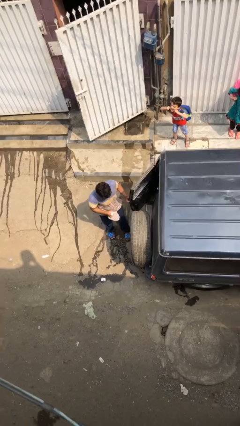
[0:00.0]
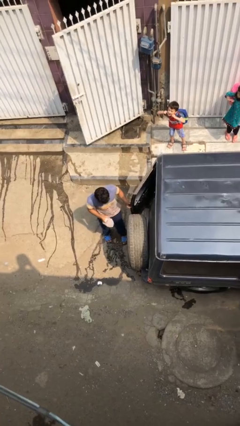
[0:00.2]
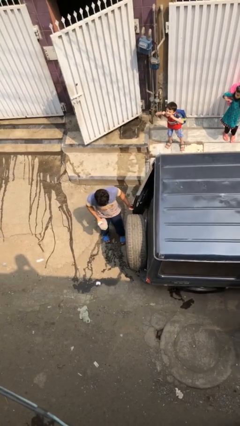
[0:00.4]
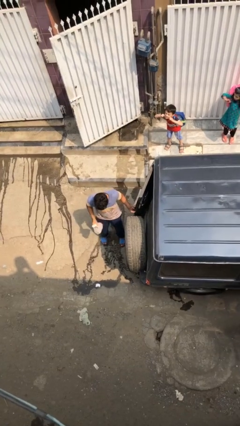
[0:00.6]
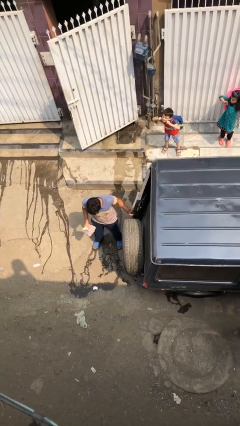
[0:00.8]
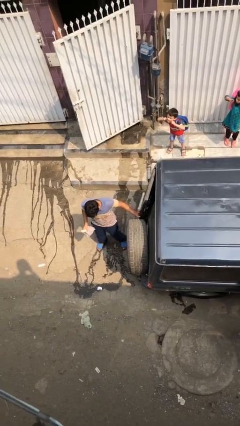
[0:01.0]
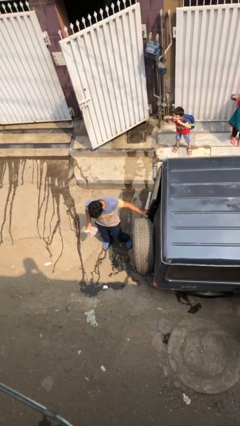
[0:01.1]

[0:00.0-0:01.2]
person closes car door

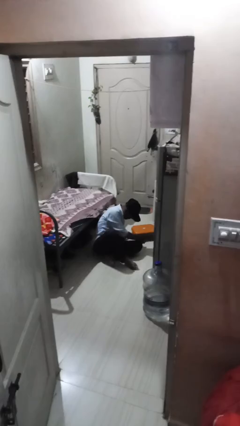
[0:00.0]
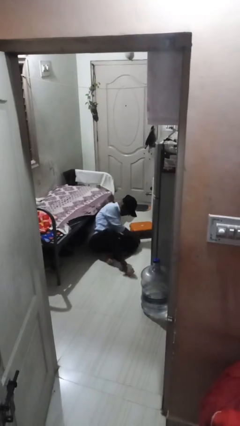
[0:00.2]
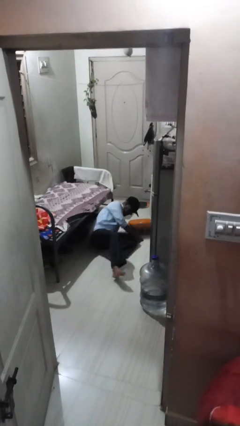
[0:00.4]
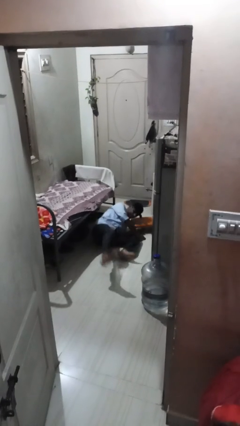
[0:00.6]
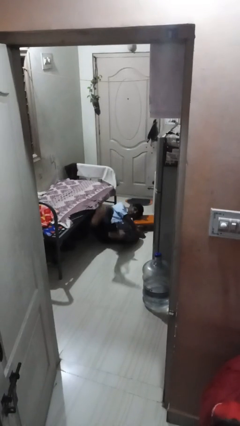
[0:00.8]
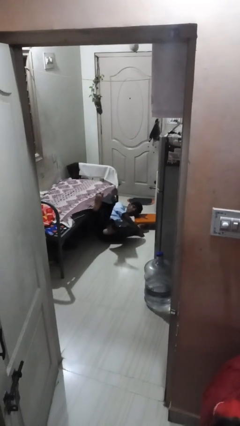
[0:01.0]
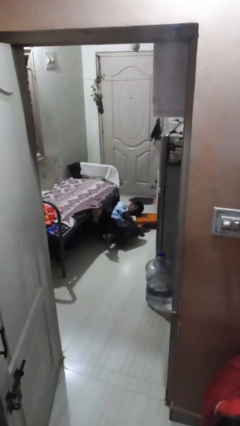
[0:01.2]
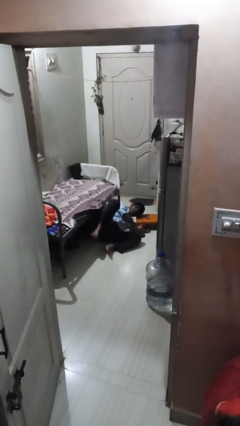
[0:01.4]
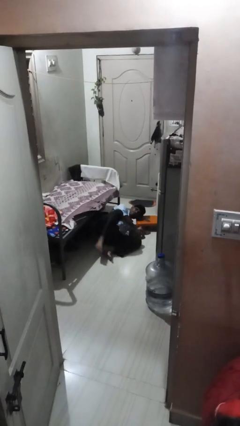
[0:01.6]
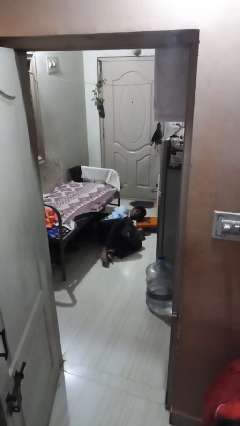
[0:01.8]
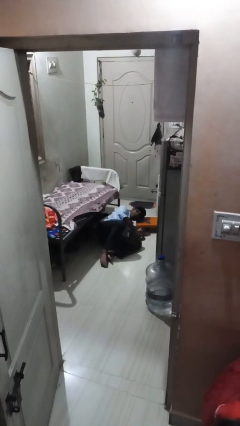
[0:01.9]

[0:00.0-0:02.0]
person lies down on floor

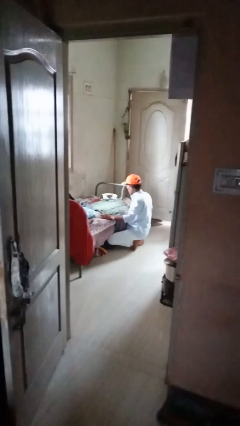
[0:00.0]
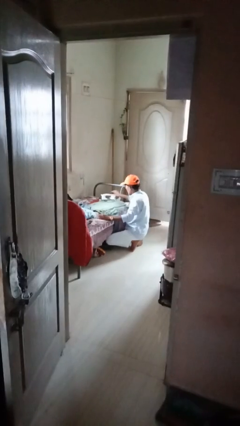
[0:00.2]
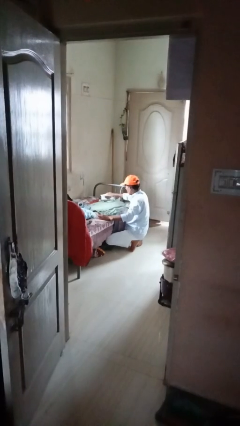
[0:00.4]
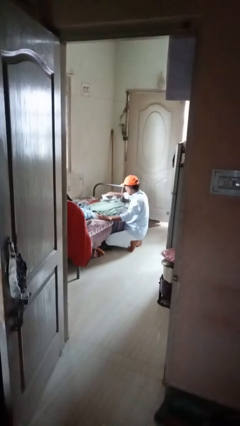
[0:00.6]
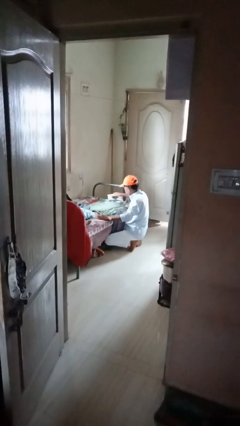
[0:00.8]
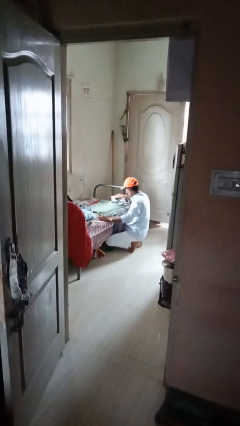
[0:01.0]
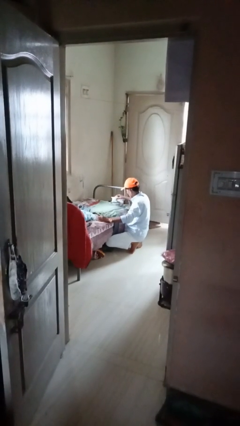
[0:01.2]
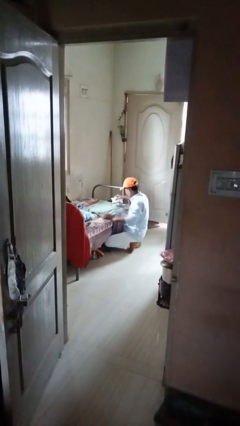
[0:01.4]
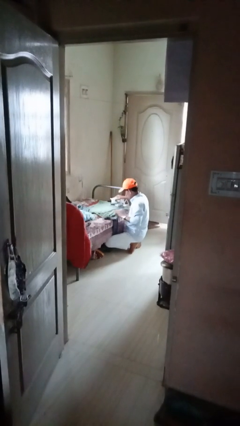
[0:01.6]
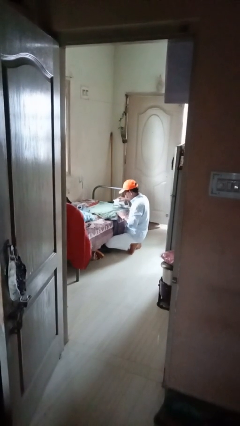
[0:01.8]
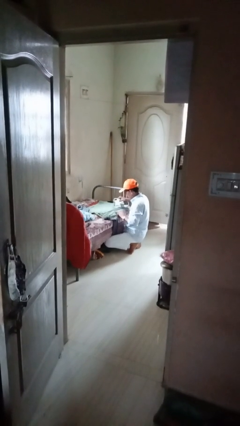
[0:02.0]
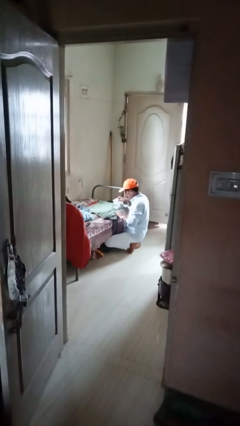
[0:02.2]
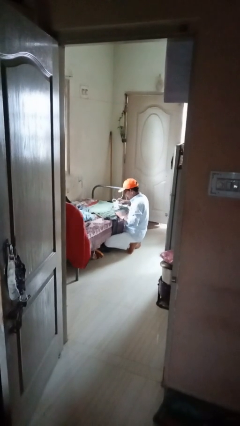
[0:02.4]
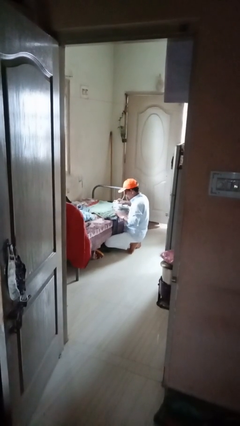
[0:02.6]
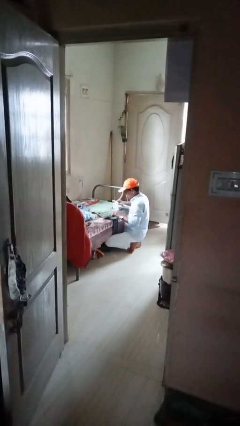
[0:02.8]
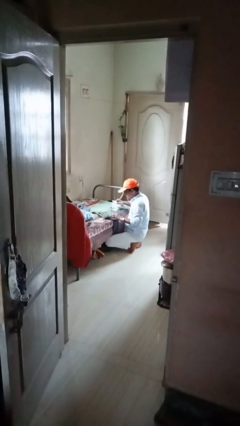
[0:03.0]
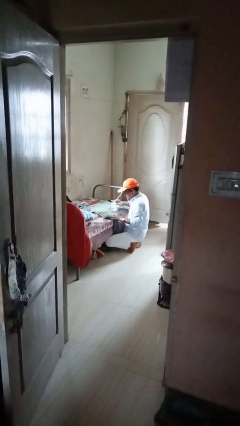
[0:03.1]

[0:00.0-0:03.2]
person irons clothes

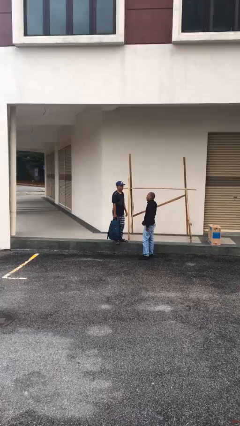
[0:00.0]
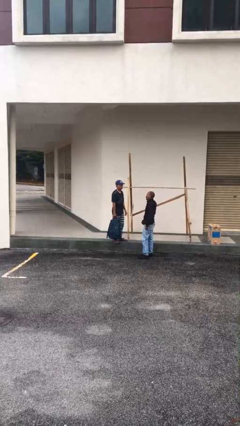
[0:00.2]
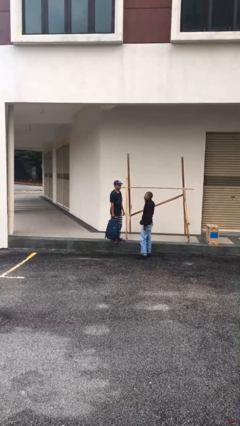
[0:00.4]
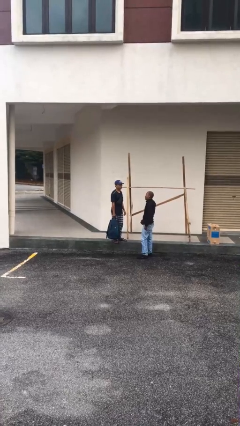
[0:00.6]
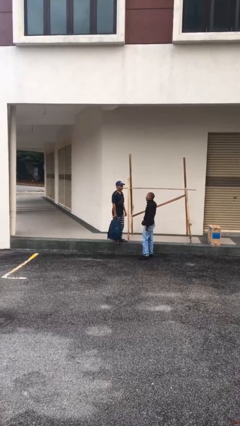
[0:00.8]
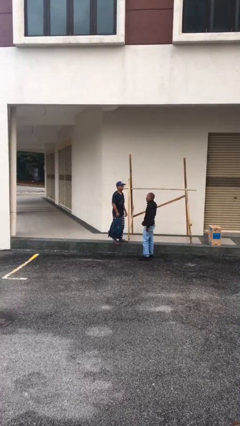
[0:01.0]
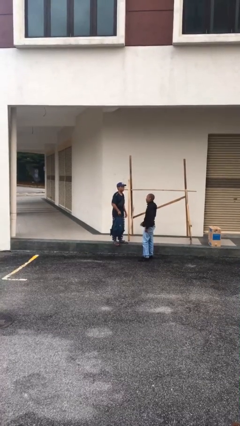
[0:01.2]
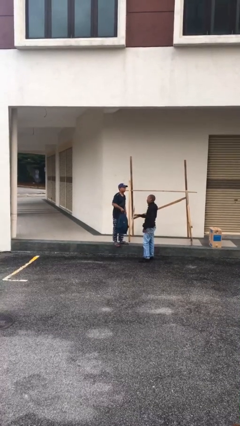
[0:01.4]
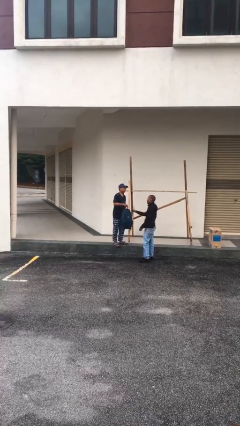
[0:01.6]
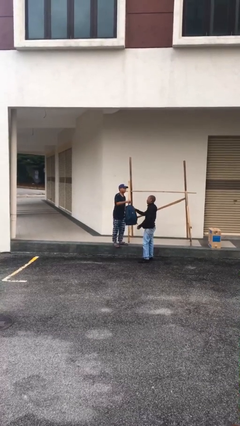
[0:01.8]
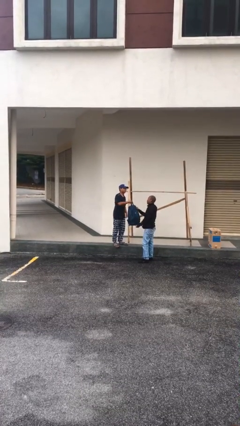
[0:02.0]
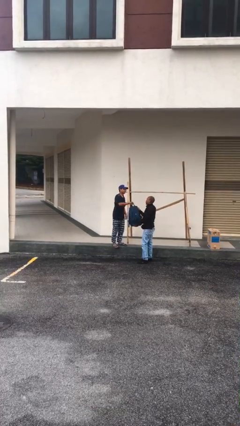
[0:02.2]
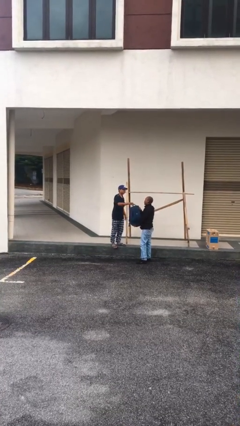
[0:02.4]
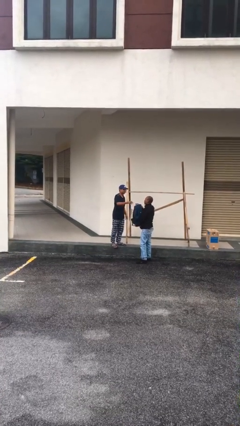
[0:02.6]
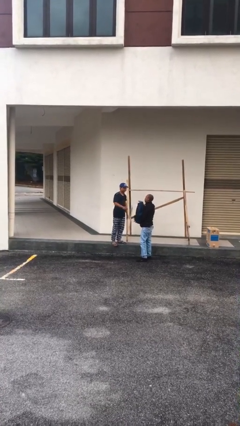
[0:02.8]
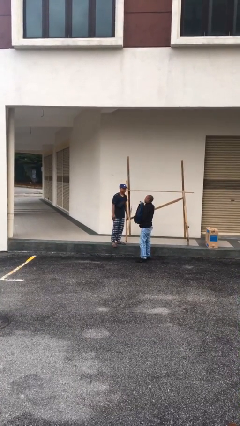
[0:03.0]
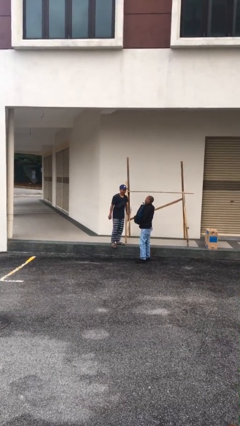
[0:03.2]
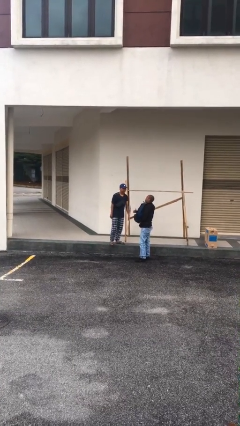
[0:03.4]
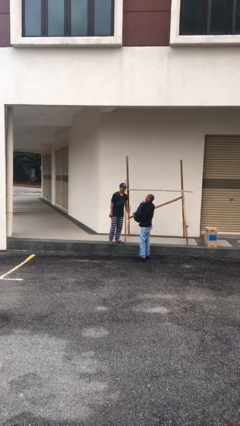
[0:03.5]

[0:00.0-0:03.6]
person transfers object to person

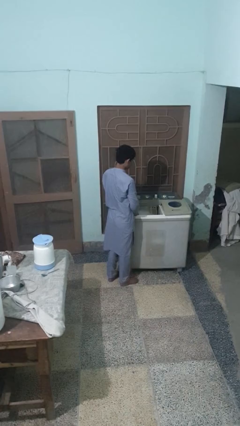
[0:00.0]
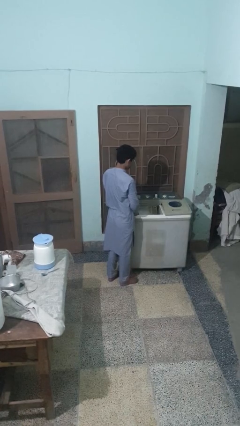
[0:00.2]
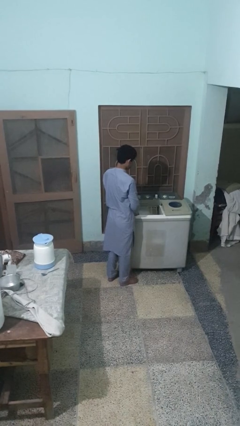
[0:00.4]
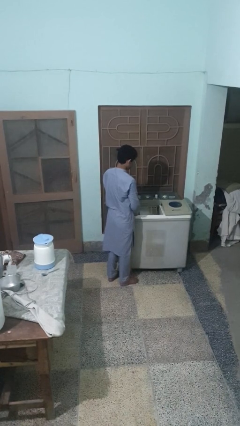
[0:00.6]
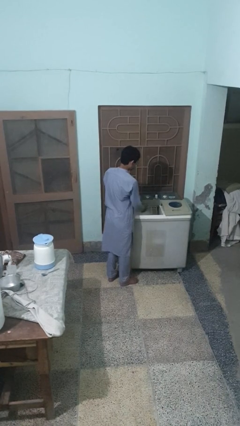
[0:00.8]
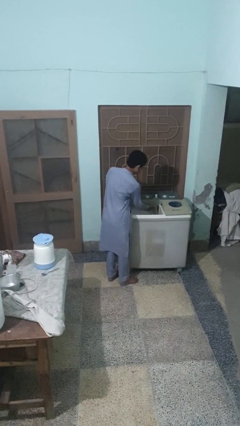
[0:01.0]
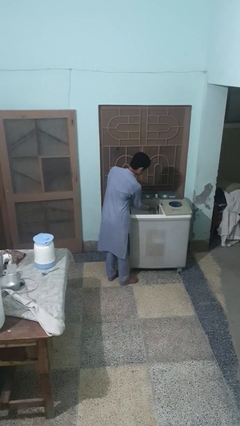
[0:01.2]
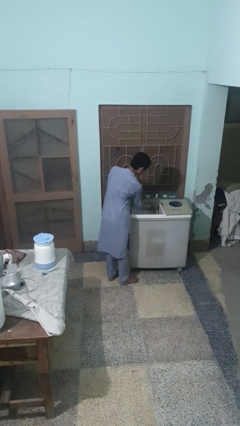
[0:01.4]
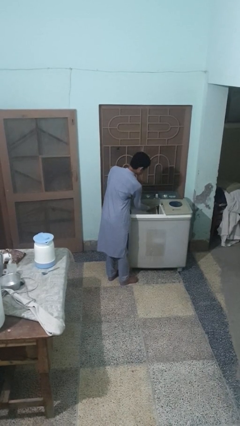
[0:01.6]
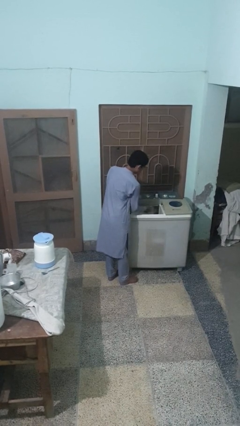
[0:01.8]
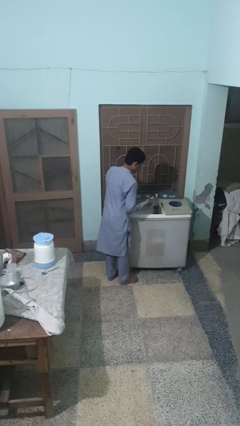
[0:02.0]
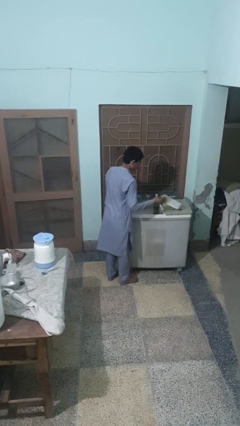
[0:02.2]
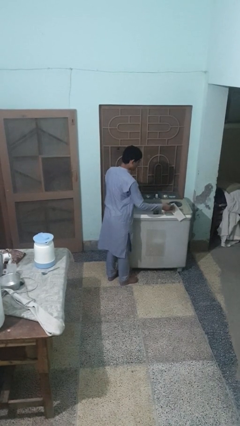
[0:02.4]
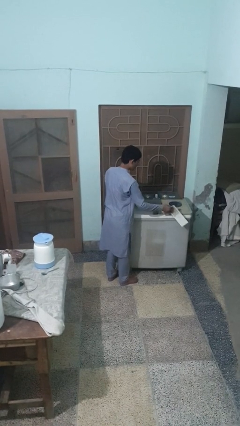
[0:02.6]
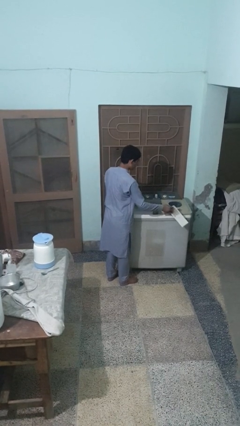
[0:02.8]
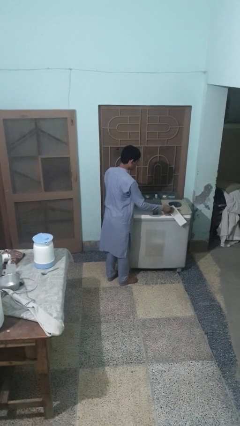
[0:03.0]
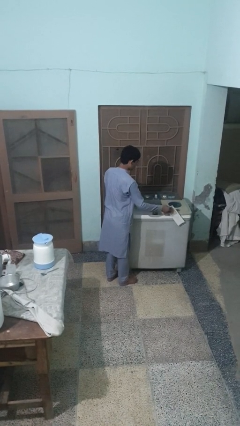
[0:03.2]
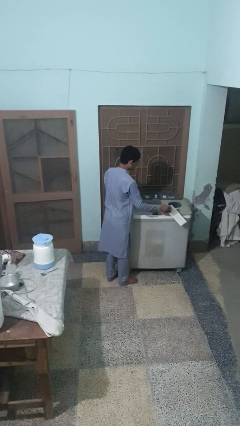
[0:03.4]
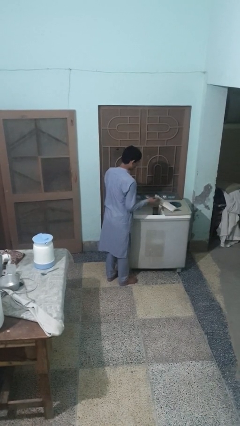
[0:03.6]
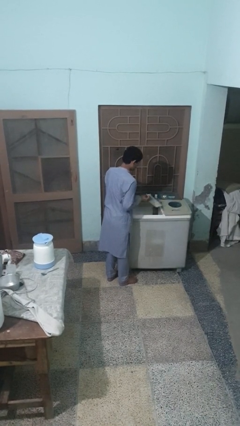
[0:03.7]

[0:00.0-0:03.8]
person cleans dryer lint trap

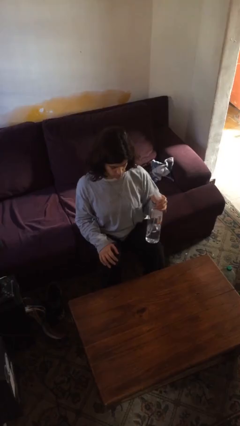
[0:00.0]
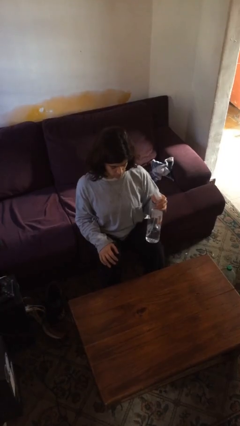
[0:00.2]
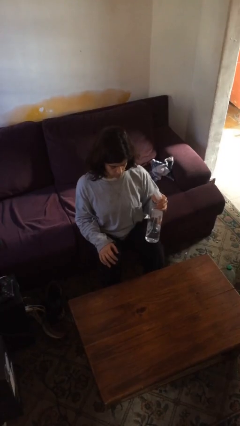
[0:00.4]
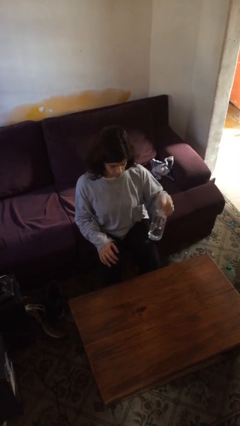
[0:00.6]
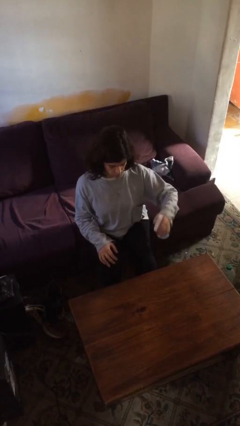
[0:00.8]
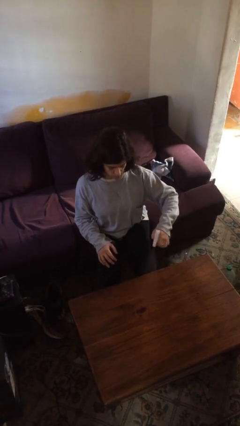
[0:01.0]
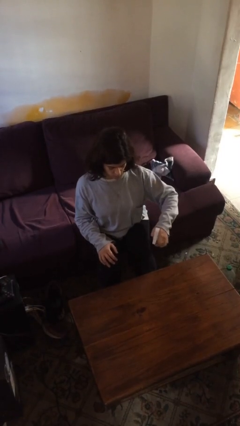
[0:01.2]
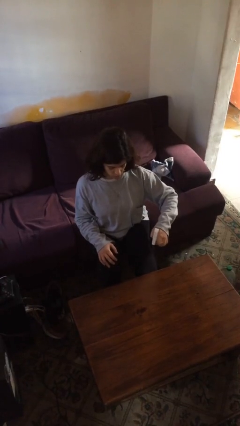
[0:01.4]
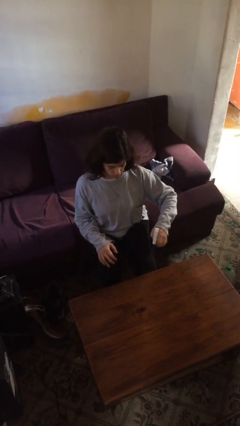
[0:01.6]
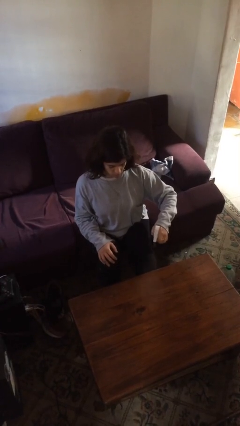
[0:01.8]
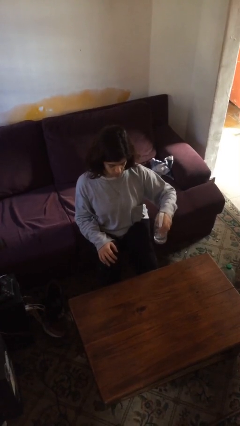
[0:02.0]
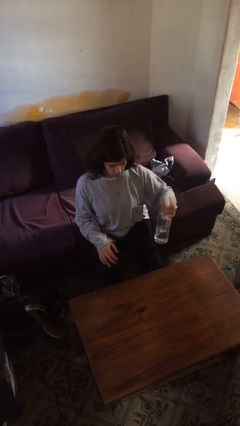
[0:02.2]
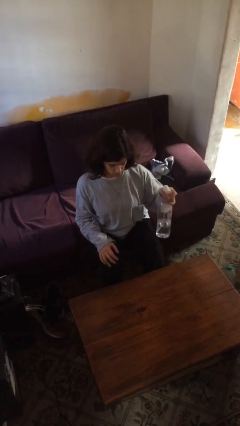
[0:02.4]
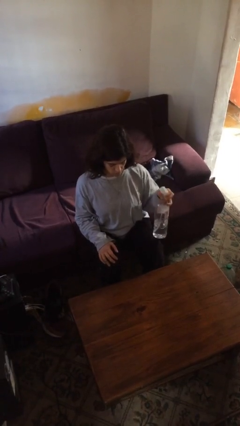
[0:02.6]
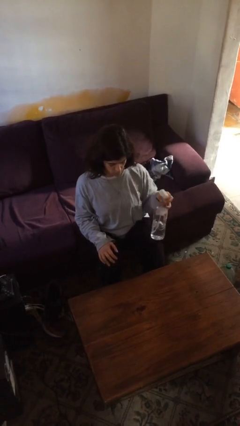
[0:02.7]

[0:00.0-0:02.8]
person sprays from bottle

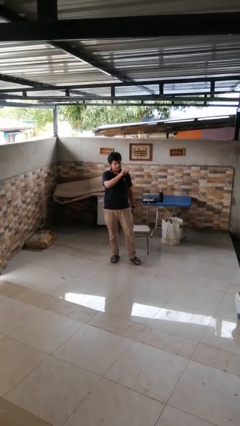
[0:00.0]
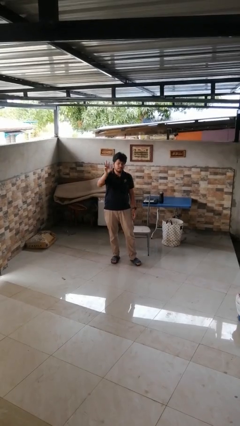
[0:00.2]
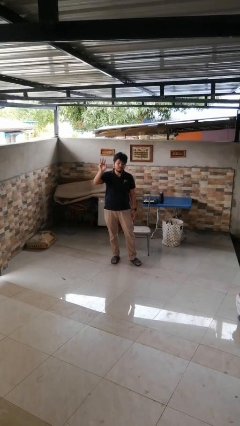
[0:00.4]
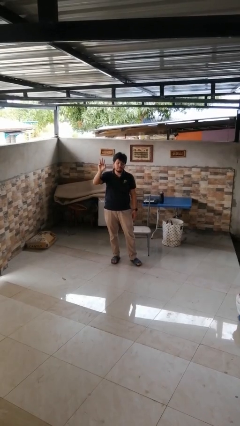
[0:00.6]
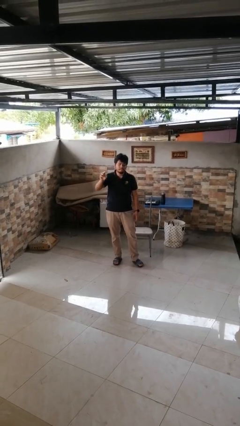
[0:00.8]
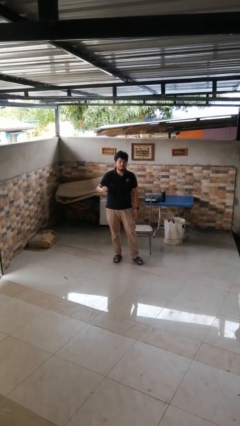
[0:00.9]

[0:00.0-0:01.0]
person gestures swipe right
